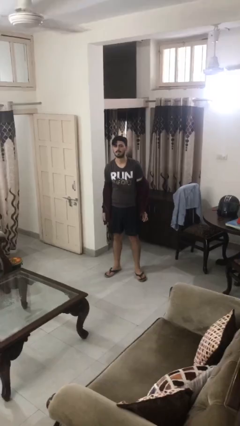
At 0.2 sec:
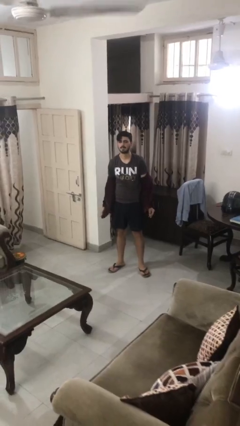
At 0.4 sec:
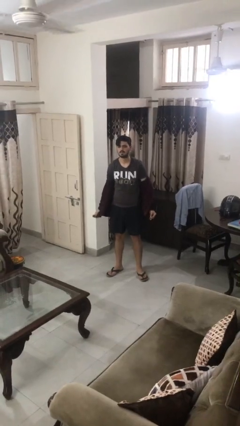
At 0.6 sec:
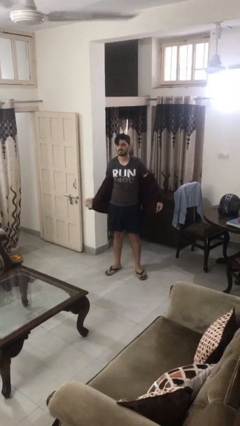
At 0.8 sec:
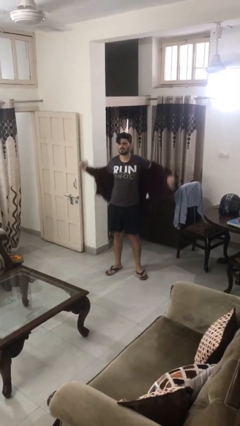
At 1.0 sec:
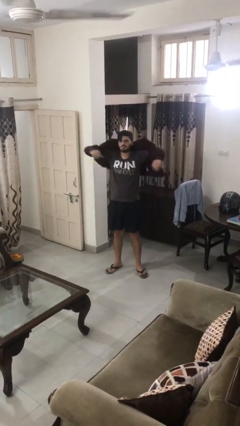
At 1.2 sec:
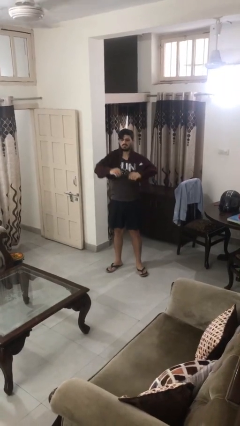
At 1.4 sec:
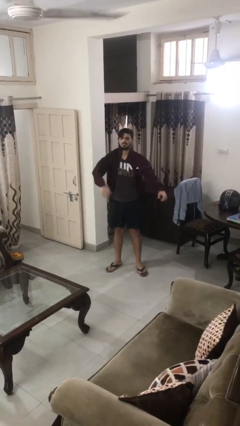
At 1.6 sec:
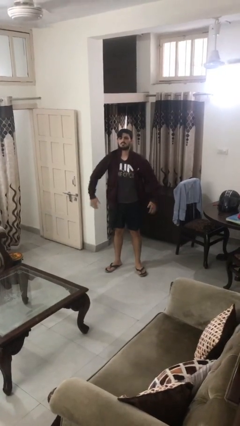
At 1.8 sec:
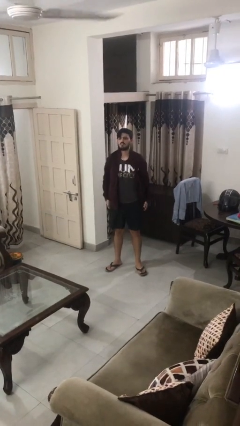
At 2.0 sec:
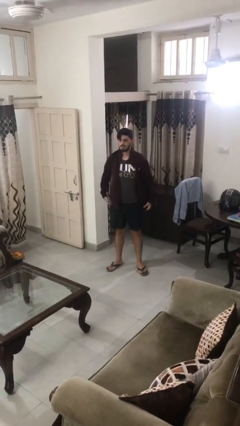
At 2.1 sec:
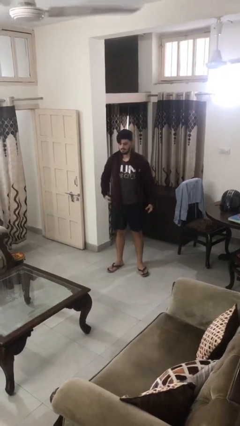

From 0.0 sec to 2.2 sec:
person puts on jacket

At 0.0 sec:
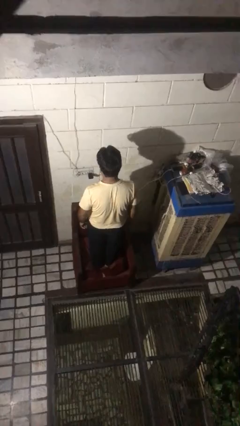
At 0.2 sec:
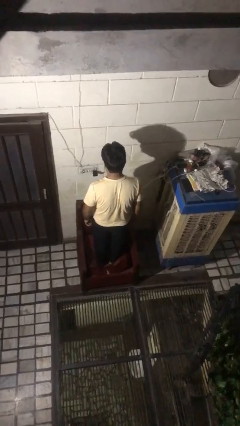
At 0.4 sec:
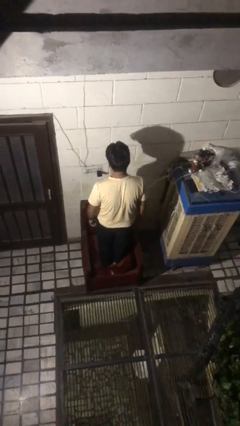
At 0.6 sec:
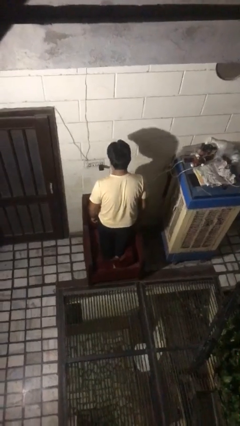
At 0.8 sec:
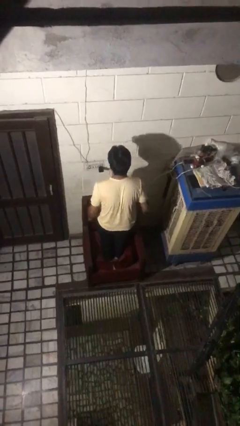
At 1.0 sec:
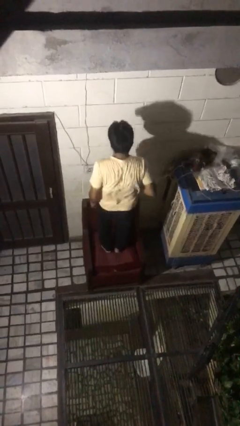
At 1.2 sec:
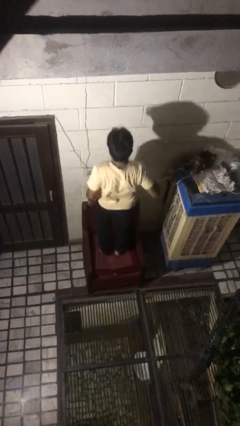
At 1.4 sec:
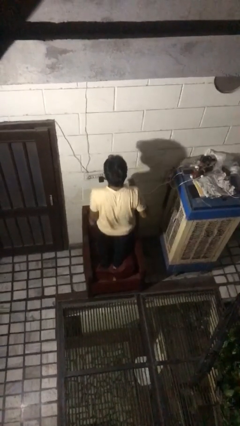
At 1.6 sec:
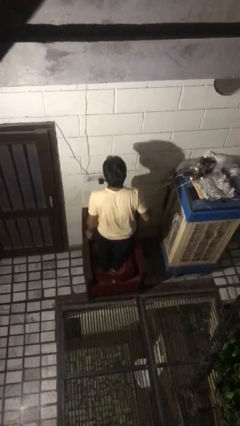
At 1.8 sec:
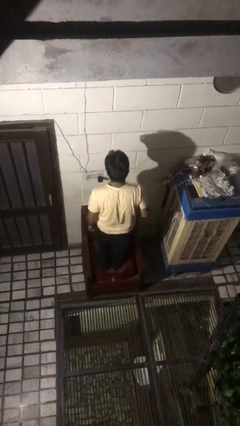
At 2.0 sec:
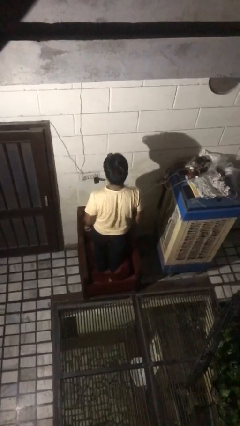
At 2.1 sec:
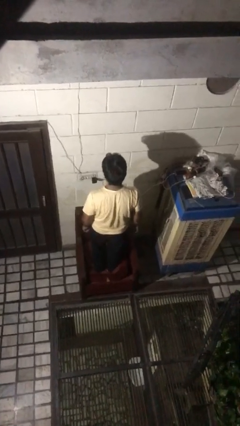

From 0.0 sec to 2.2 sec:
person jumps on couch

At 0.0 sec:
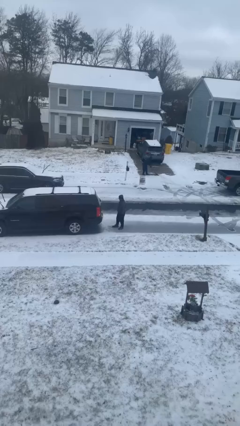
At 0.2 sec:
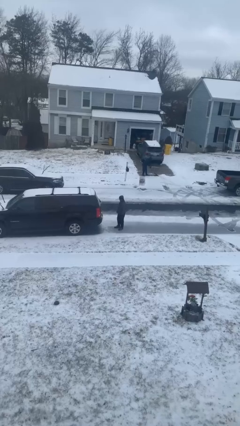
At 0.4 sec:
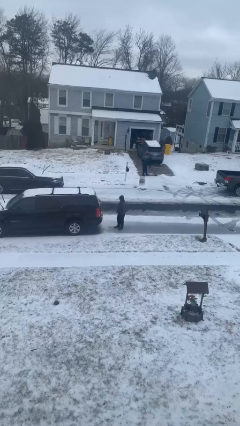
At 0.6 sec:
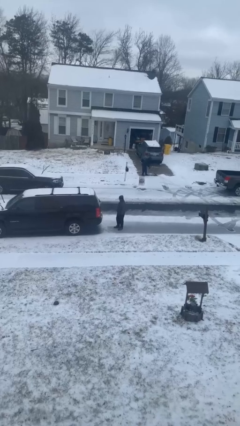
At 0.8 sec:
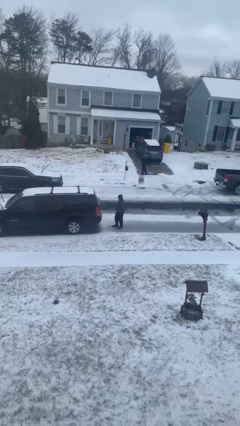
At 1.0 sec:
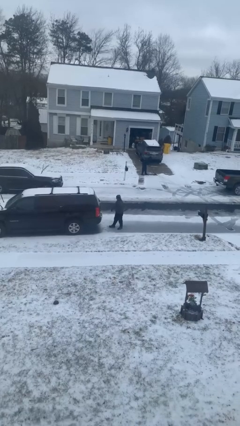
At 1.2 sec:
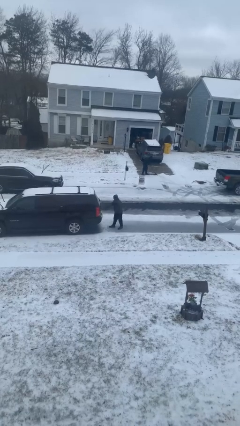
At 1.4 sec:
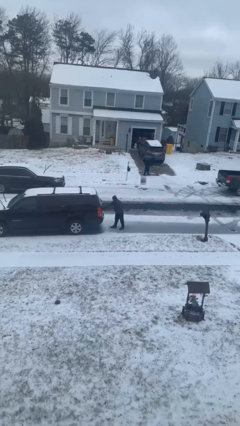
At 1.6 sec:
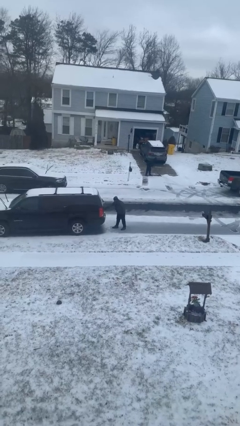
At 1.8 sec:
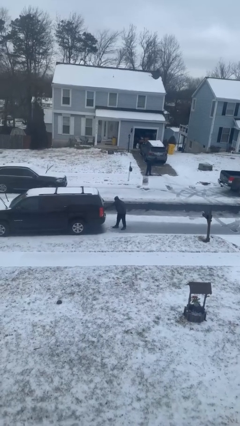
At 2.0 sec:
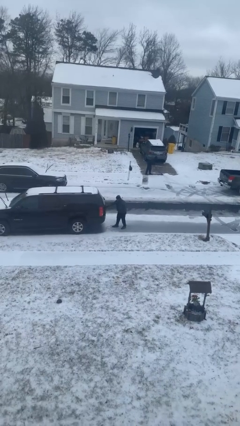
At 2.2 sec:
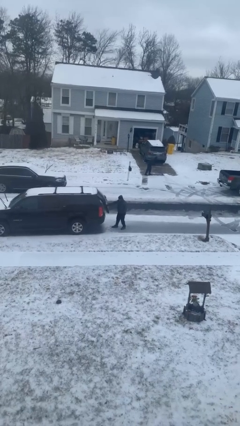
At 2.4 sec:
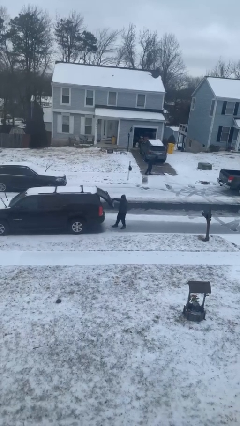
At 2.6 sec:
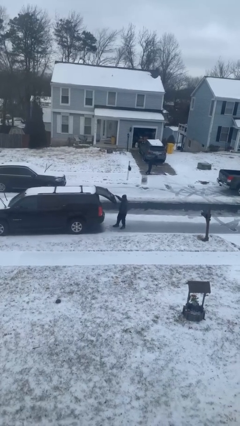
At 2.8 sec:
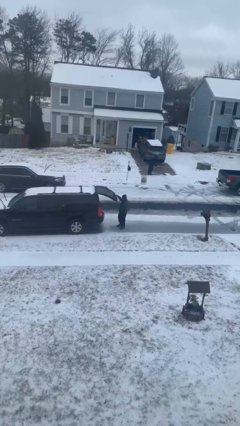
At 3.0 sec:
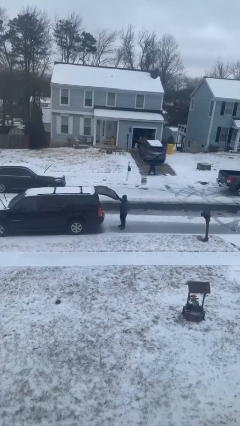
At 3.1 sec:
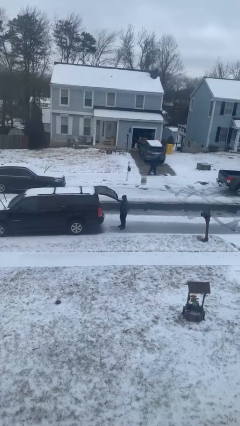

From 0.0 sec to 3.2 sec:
person opens car trunk

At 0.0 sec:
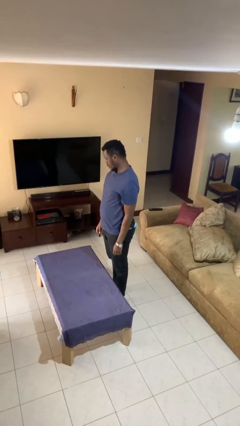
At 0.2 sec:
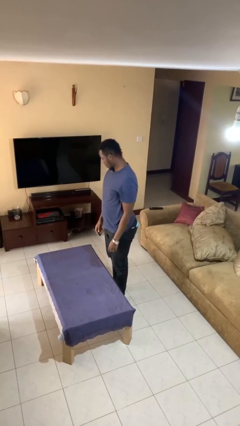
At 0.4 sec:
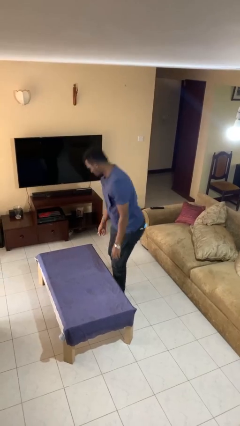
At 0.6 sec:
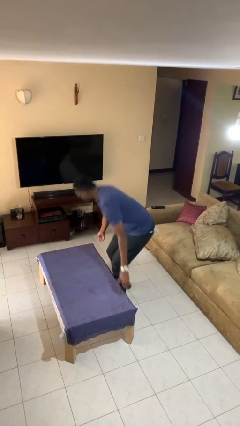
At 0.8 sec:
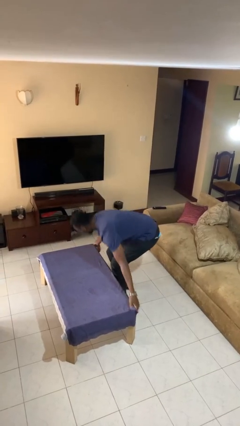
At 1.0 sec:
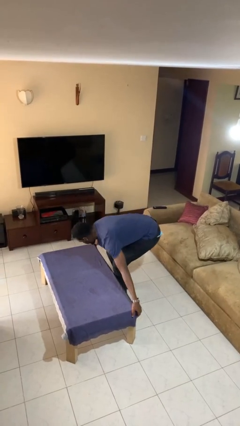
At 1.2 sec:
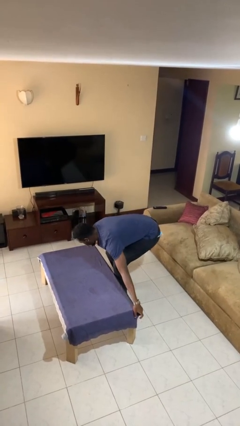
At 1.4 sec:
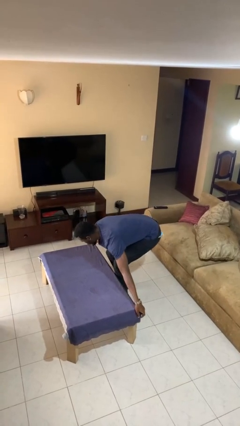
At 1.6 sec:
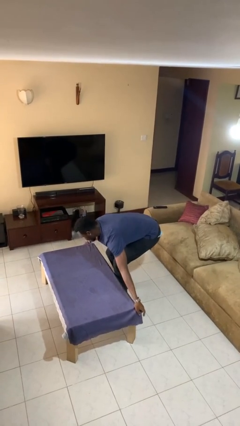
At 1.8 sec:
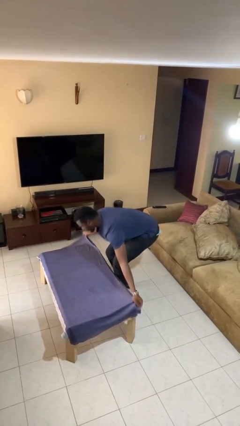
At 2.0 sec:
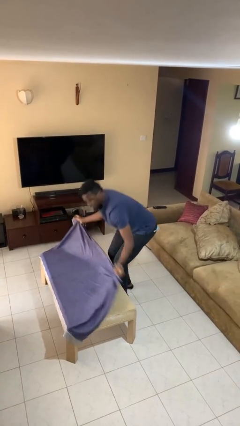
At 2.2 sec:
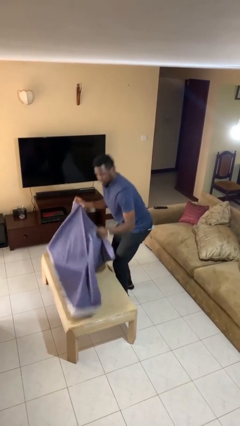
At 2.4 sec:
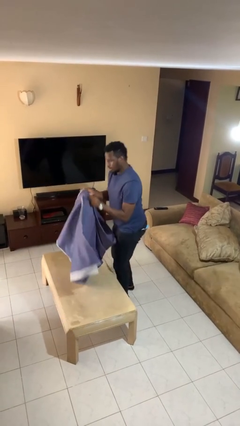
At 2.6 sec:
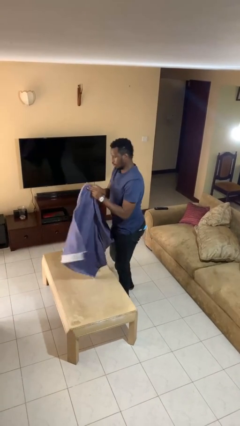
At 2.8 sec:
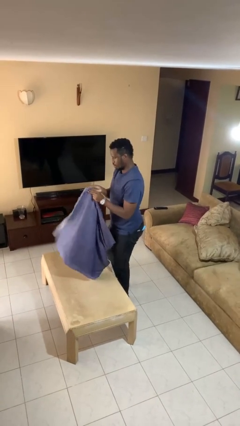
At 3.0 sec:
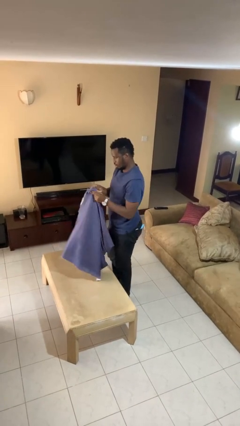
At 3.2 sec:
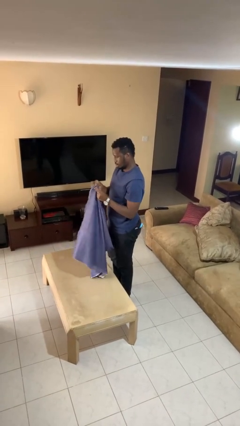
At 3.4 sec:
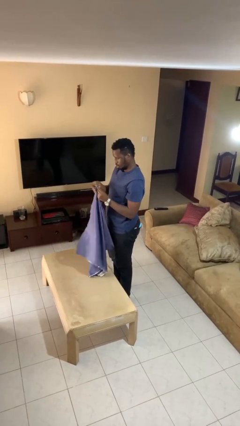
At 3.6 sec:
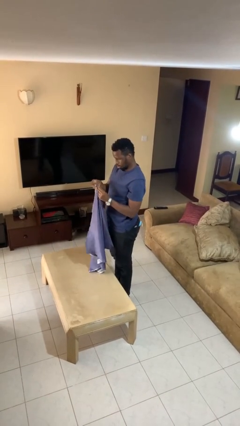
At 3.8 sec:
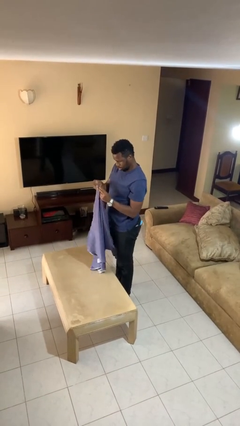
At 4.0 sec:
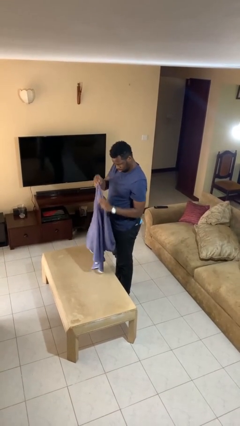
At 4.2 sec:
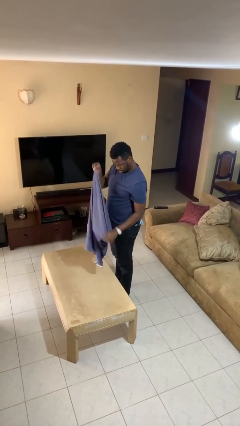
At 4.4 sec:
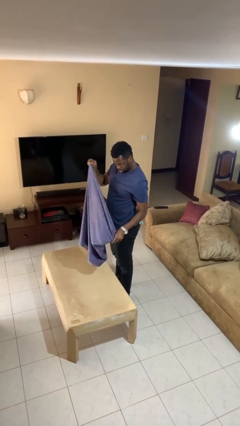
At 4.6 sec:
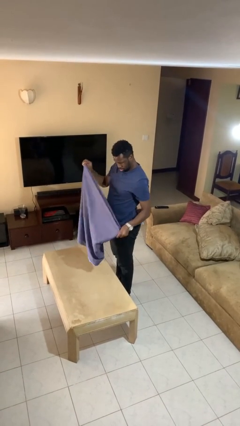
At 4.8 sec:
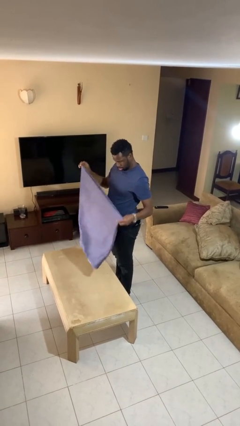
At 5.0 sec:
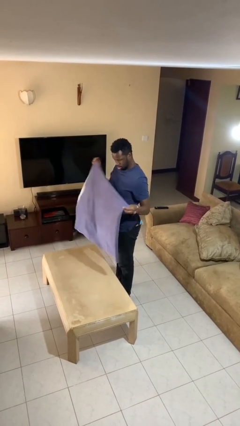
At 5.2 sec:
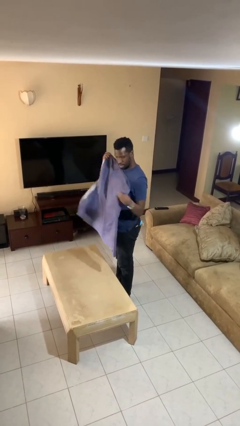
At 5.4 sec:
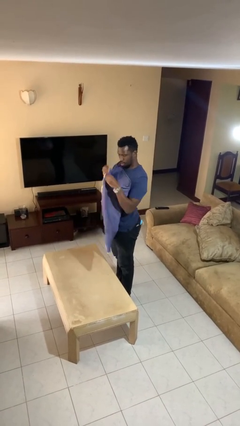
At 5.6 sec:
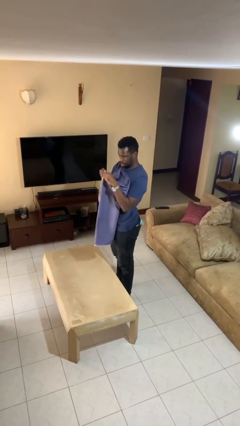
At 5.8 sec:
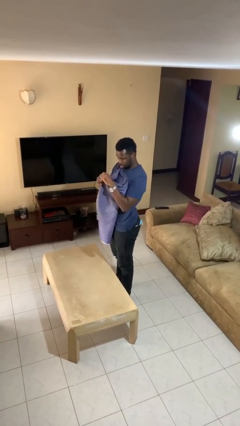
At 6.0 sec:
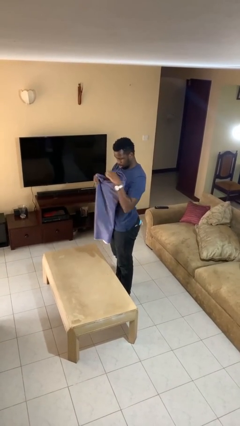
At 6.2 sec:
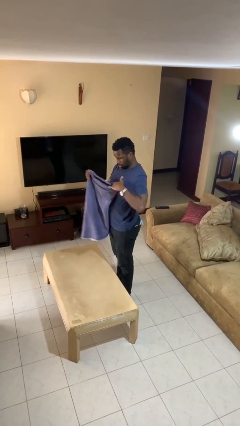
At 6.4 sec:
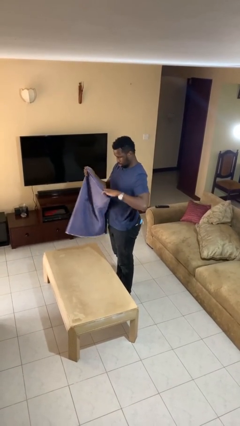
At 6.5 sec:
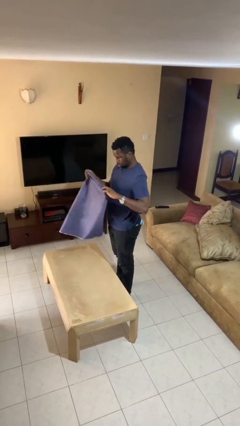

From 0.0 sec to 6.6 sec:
person folds tablecloth

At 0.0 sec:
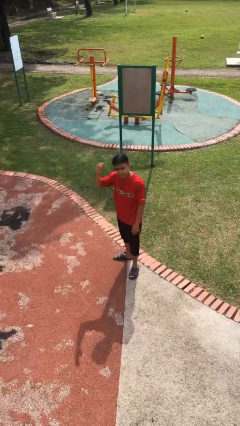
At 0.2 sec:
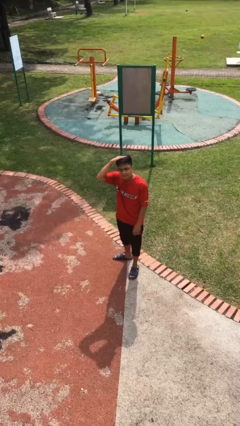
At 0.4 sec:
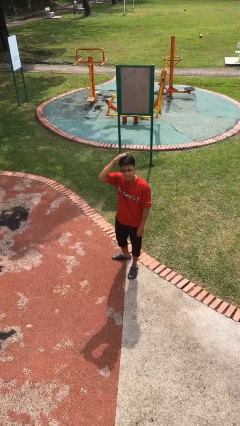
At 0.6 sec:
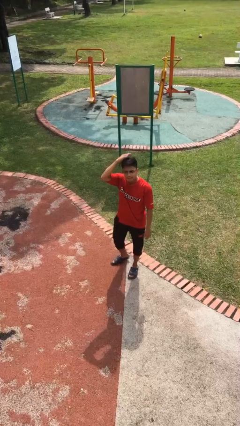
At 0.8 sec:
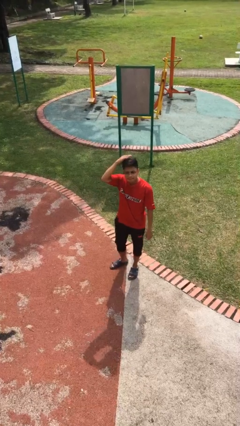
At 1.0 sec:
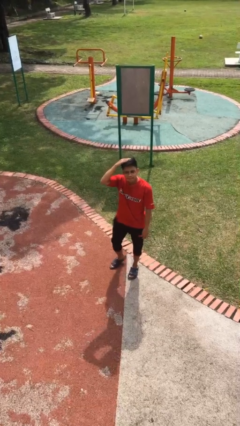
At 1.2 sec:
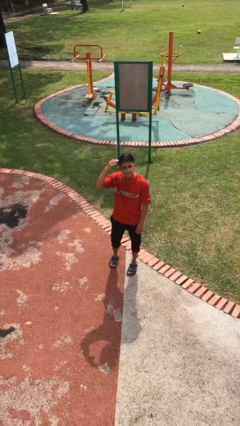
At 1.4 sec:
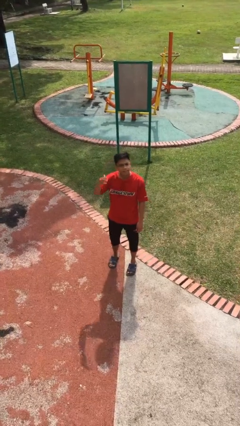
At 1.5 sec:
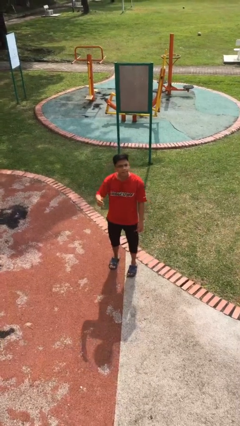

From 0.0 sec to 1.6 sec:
person pats head

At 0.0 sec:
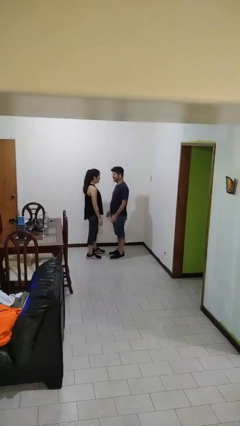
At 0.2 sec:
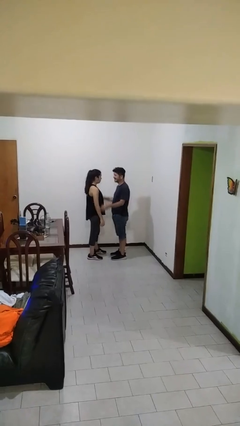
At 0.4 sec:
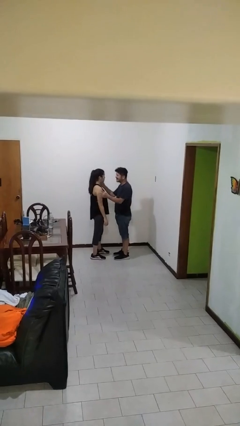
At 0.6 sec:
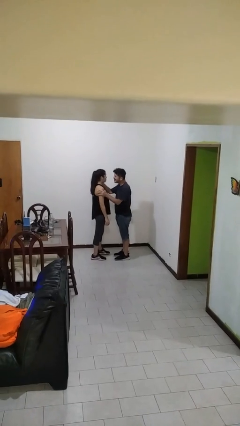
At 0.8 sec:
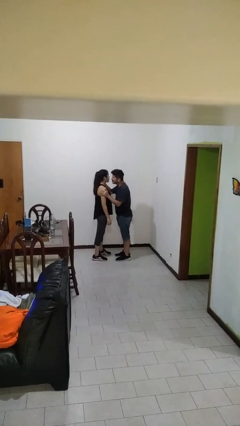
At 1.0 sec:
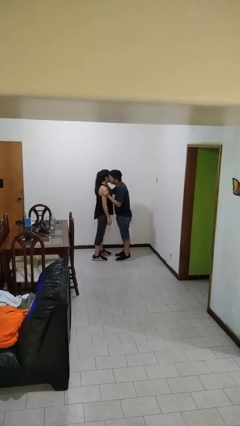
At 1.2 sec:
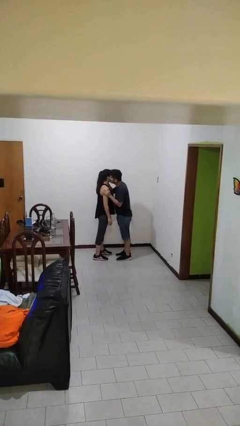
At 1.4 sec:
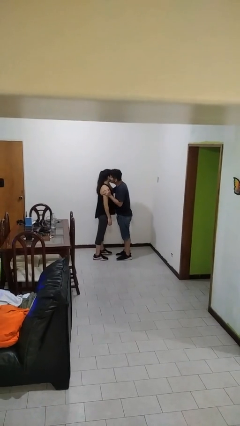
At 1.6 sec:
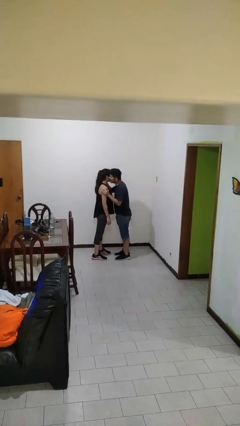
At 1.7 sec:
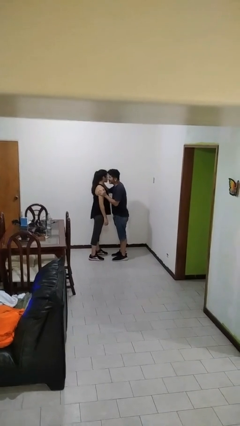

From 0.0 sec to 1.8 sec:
person kisses cheek of person
